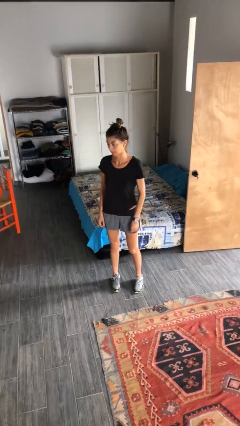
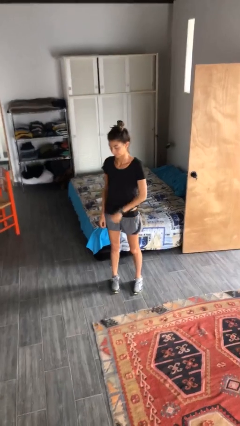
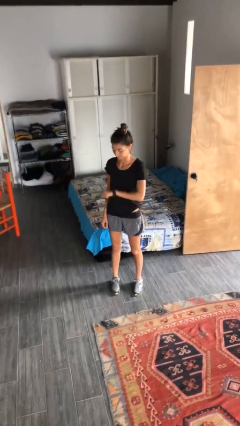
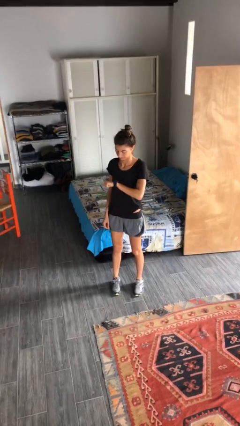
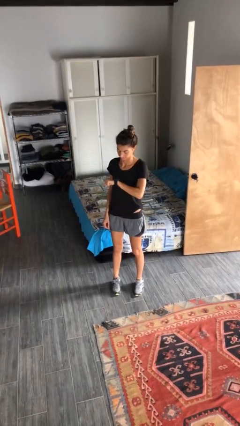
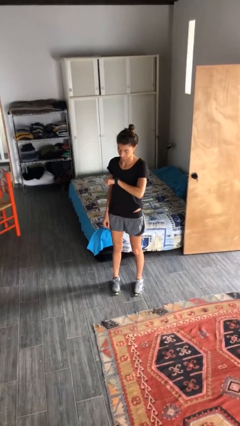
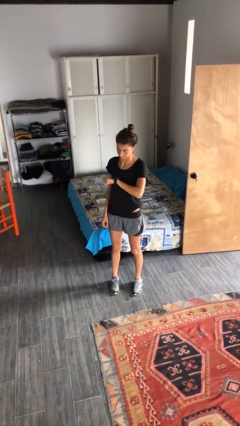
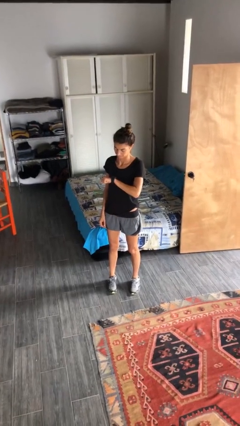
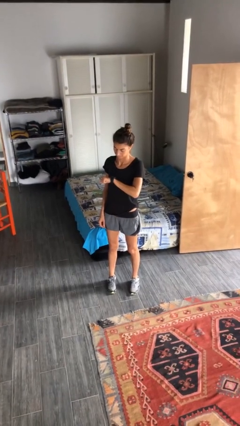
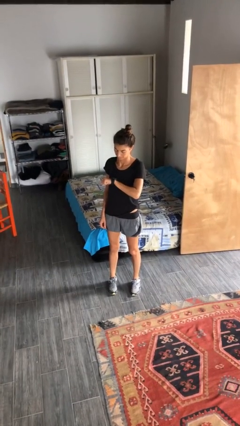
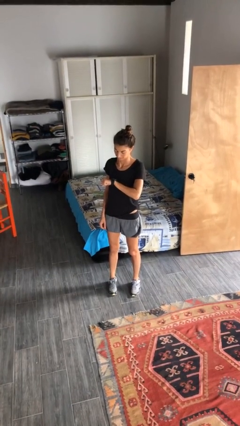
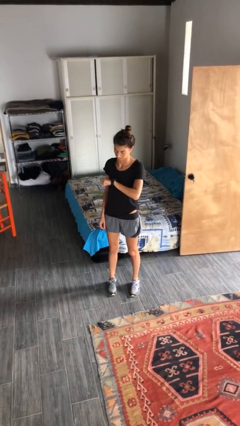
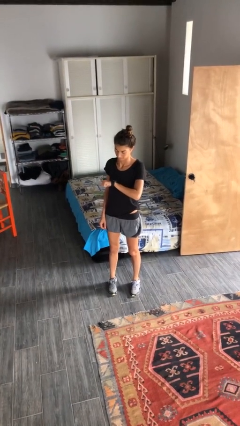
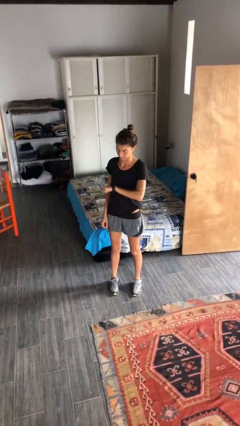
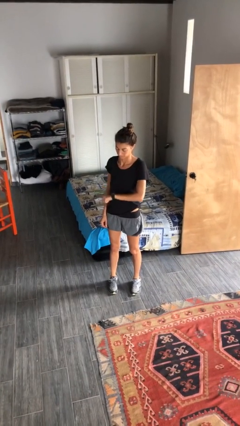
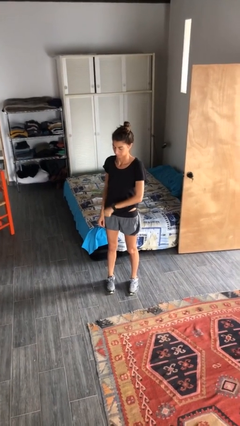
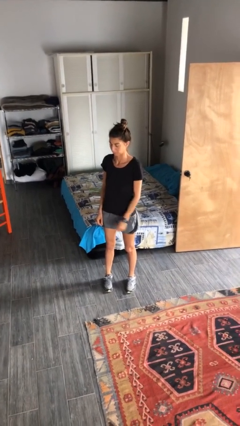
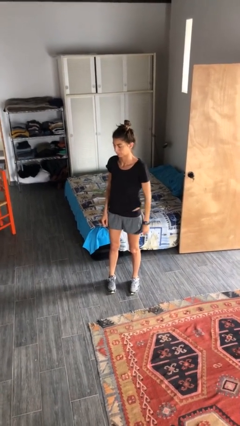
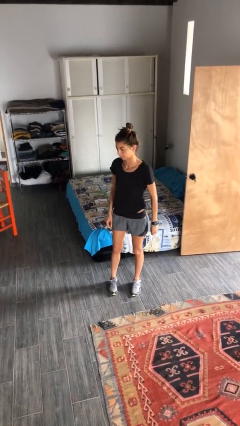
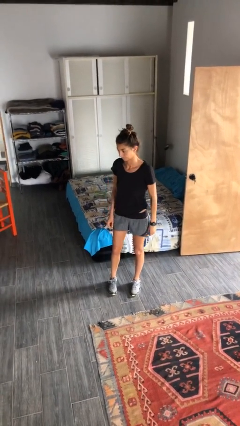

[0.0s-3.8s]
person looks at wristwatch

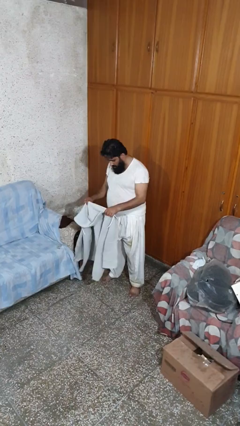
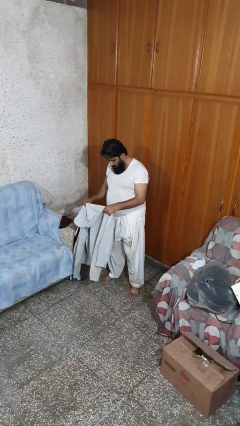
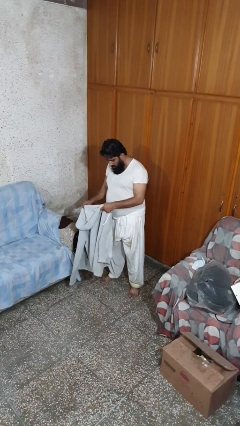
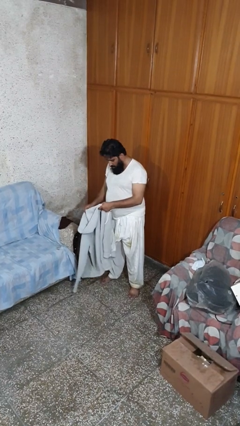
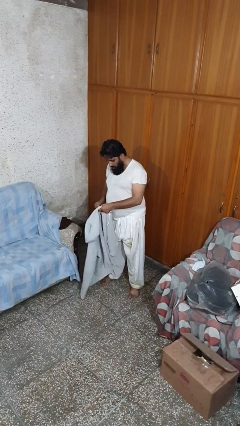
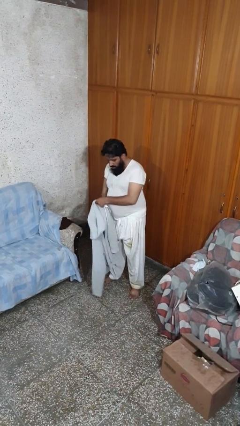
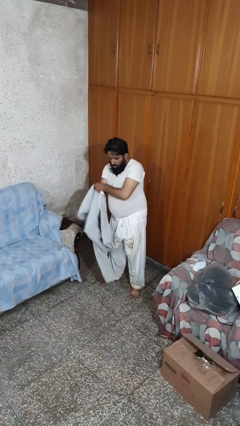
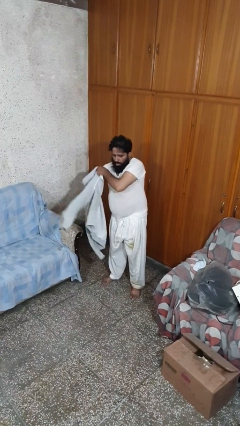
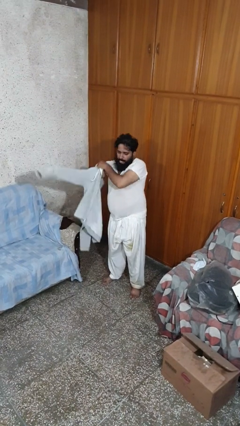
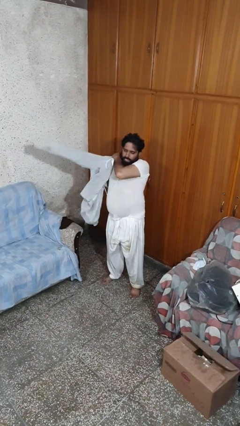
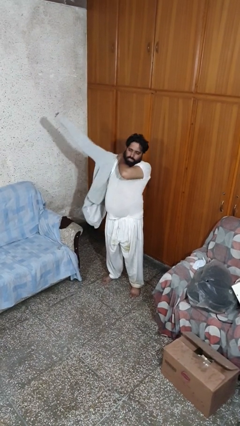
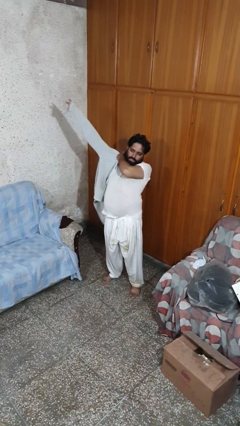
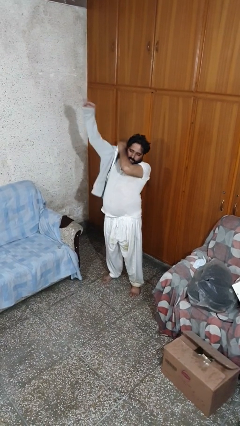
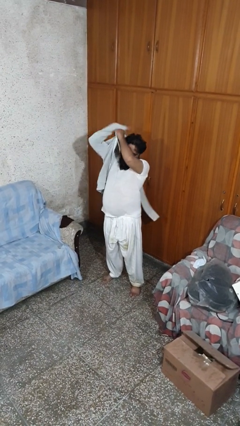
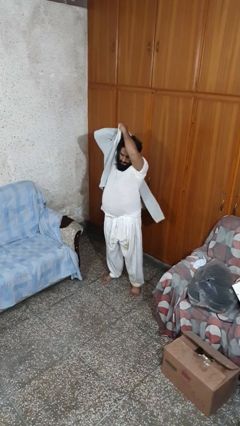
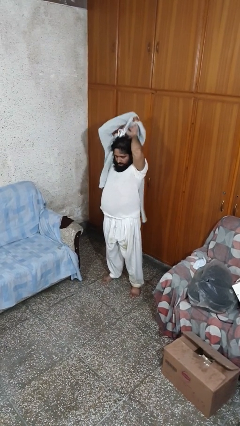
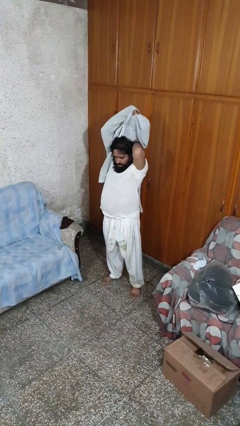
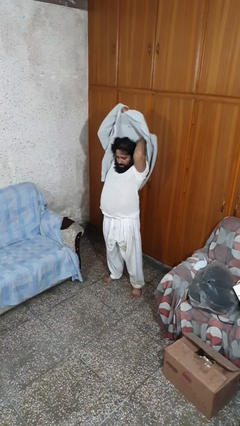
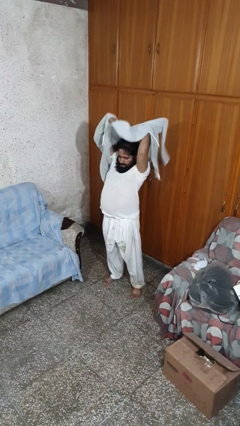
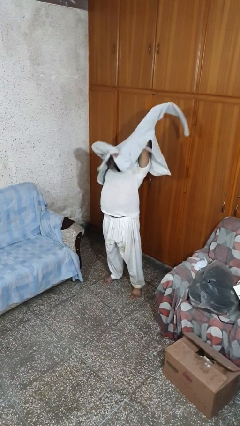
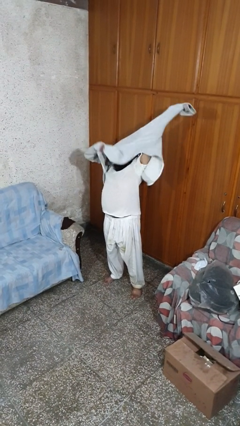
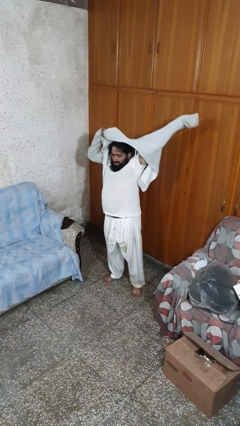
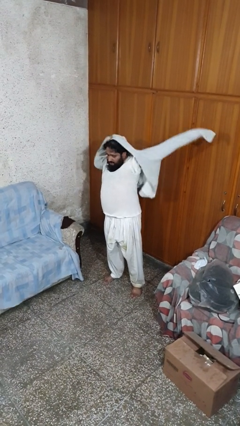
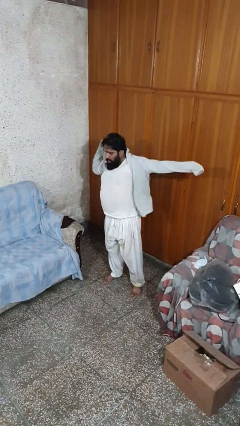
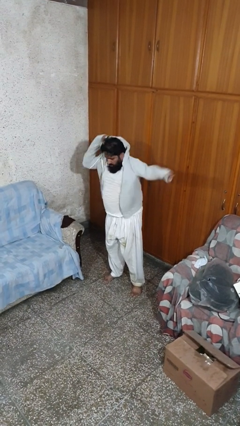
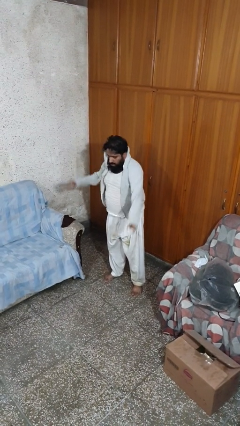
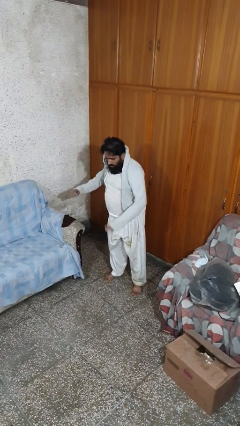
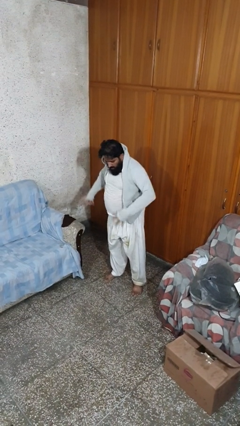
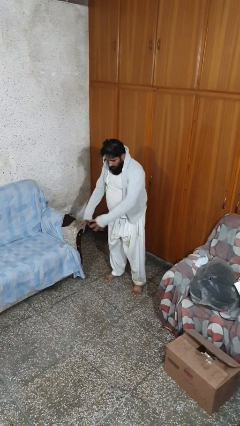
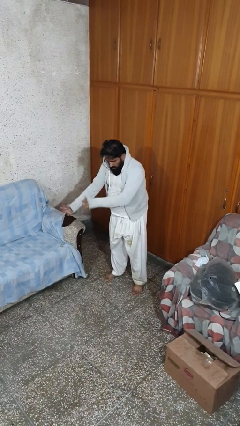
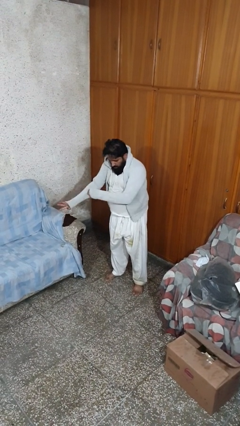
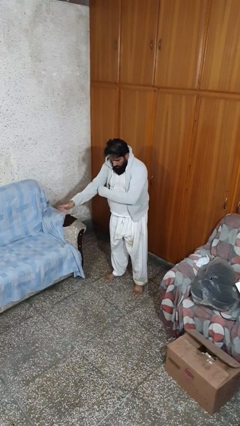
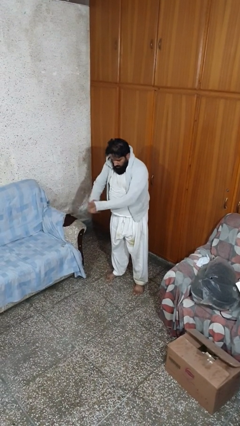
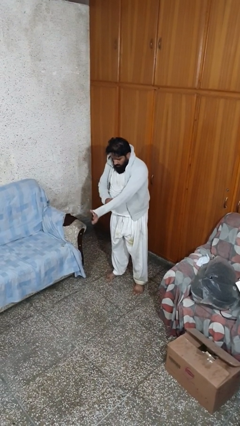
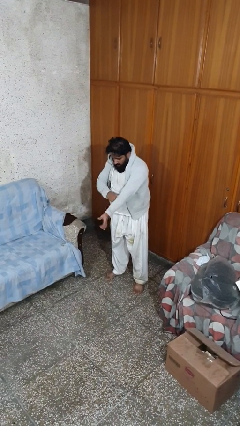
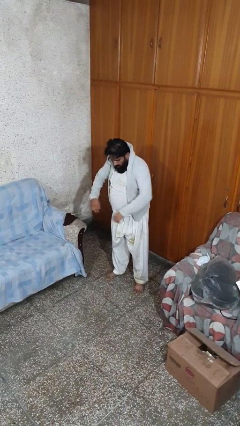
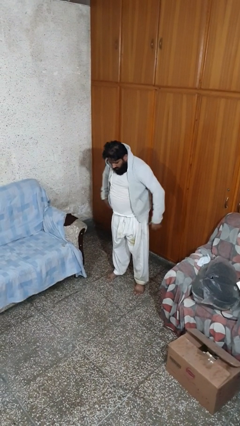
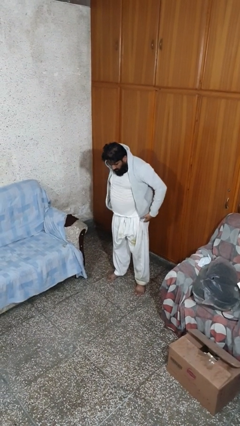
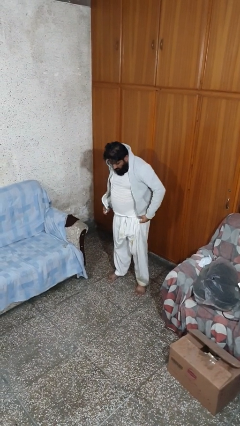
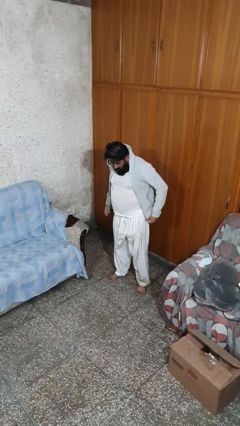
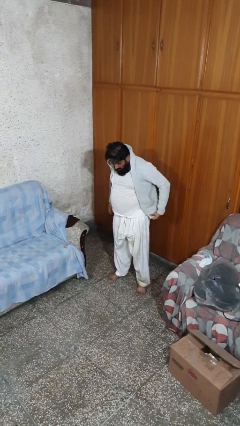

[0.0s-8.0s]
person puts on jacket

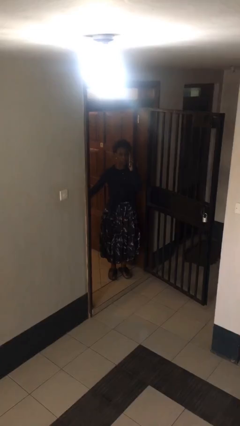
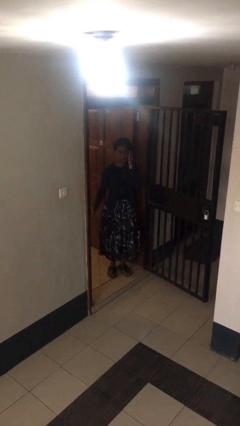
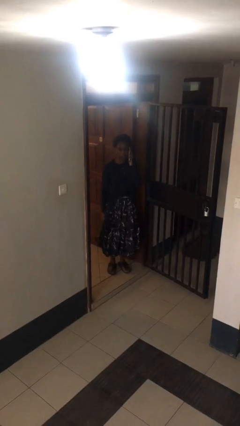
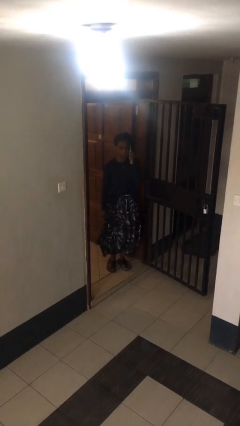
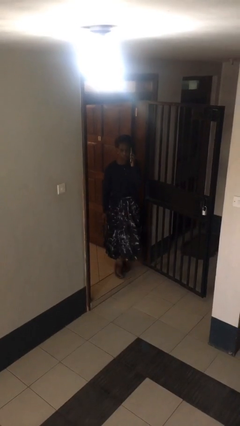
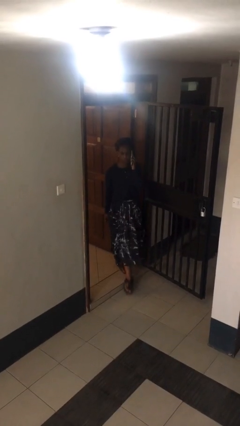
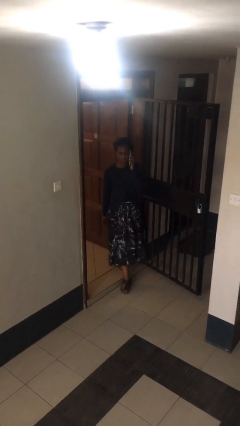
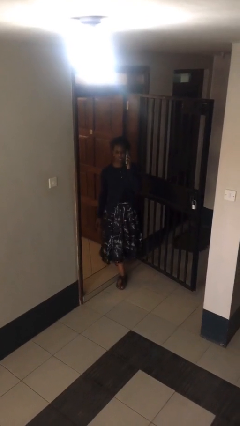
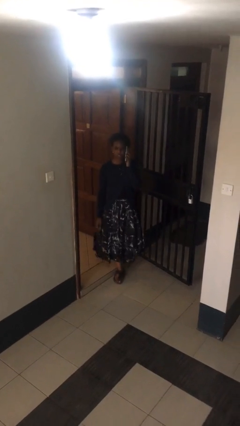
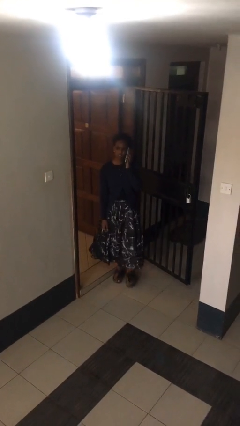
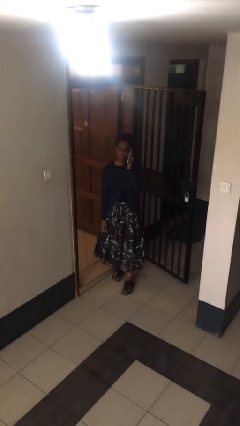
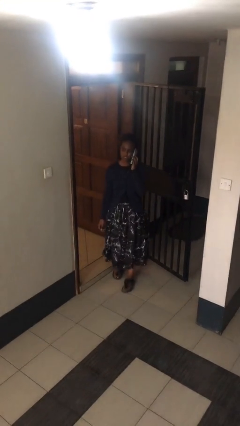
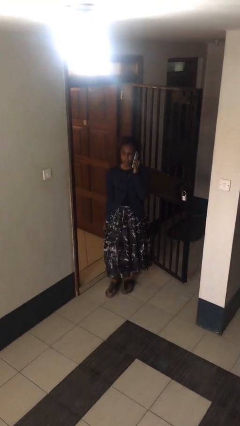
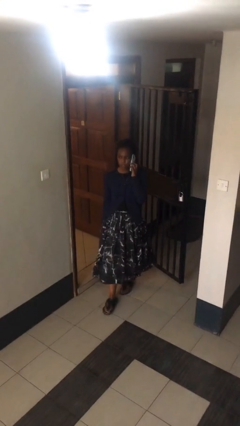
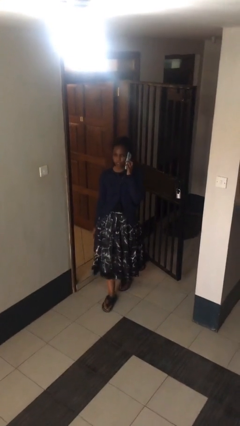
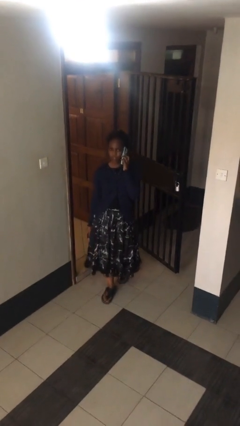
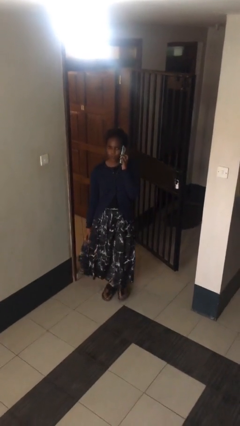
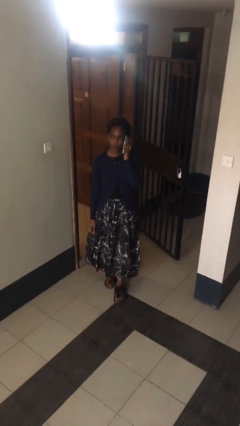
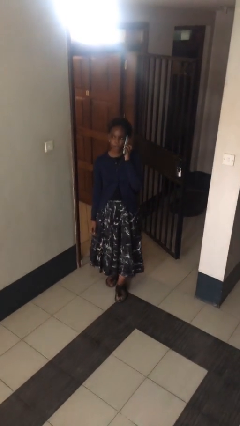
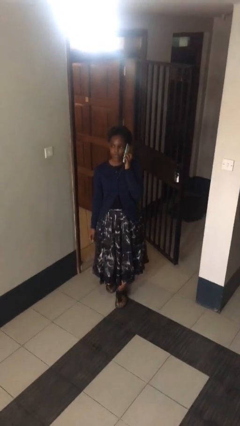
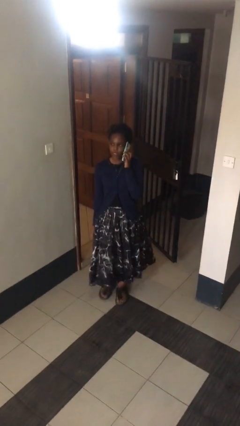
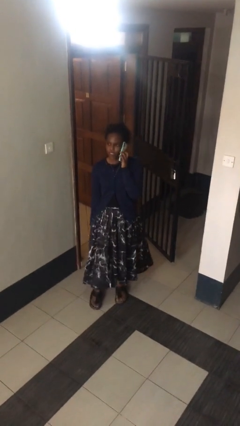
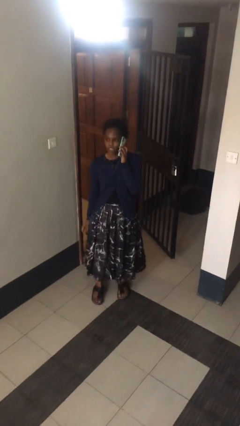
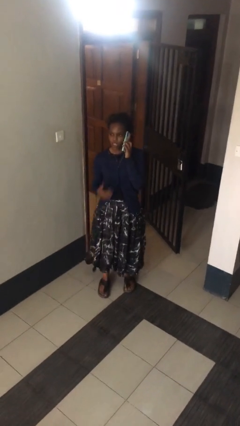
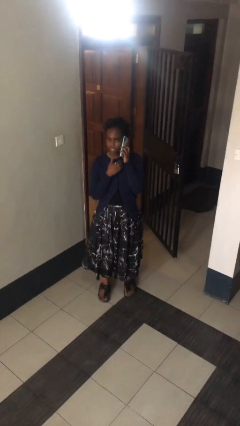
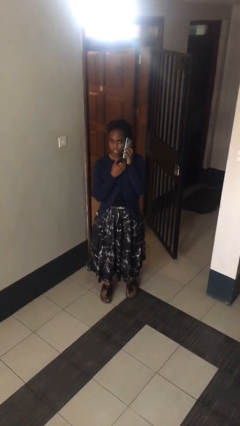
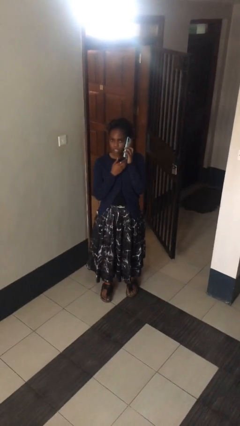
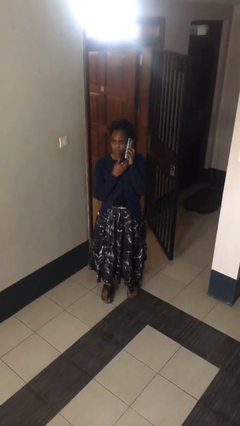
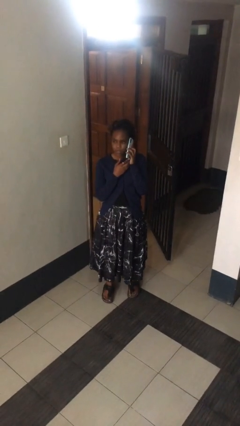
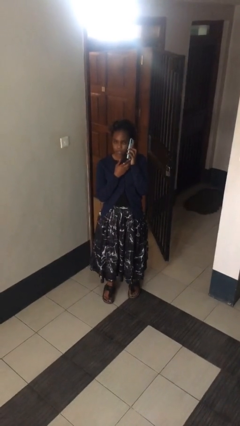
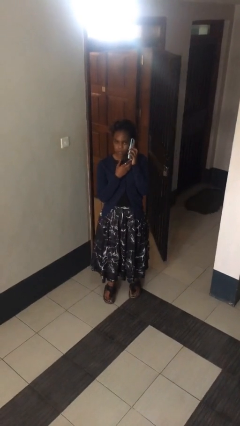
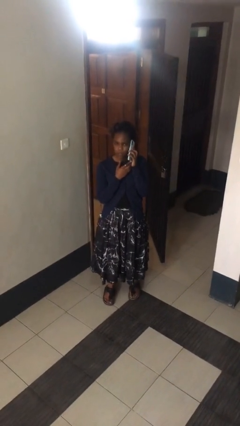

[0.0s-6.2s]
person enters scene through structure
